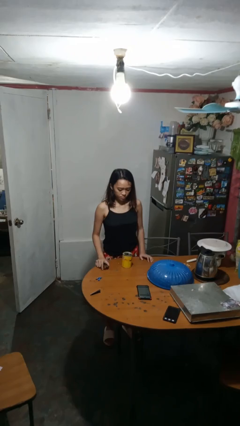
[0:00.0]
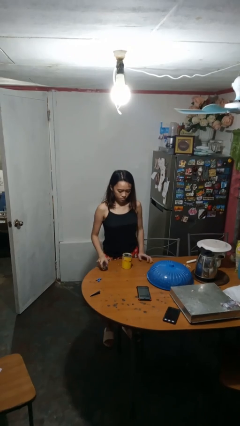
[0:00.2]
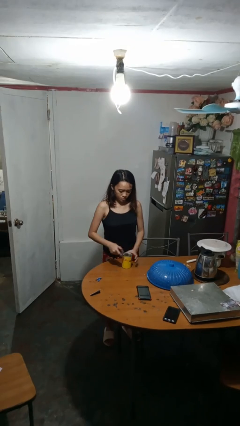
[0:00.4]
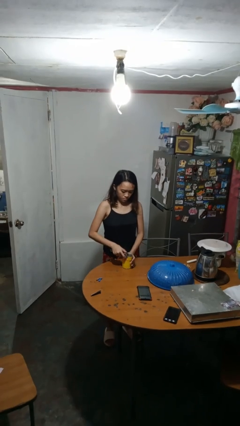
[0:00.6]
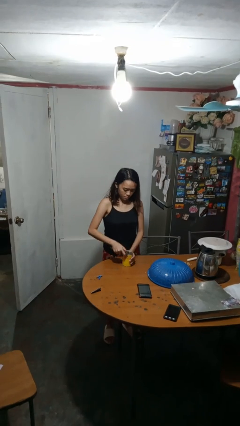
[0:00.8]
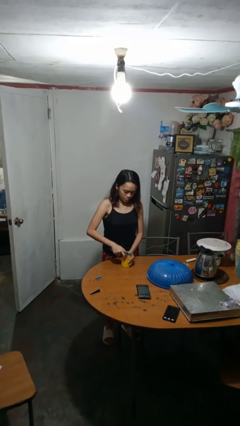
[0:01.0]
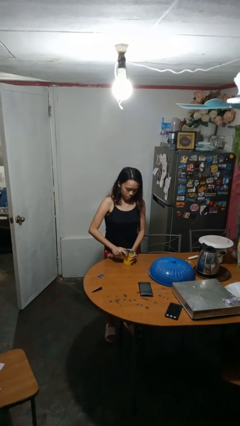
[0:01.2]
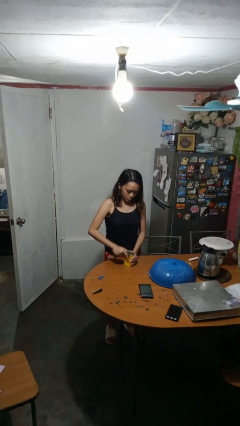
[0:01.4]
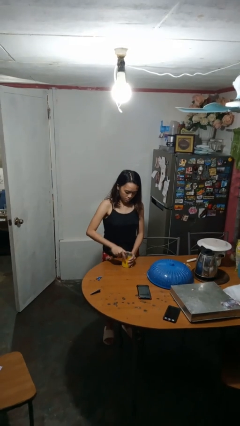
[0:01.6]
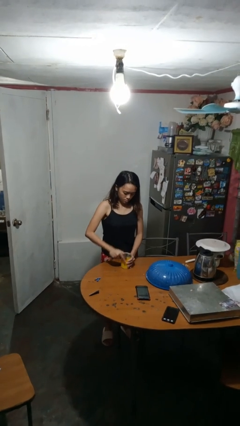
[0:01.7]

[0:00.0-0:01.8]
person opens can with can opener

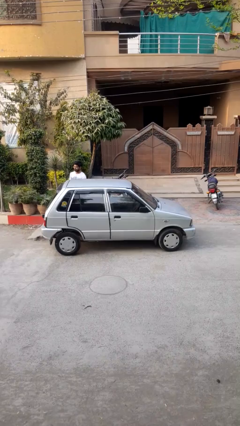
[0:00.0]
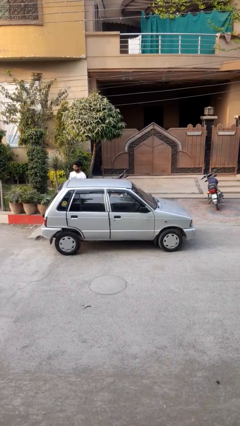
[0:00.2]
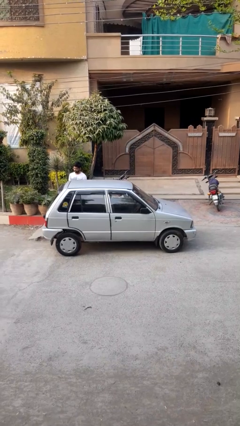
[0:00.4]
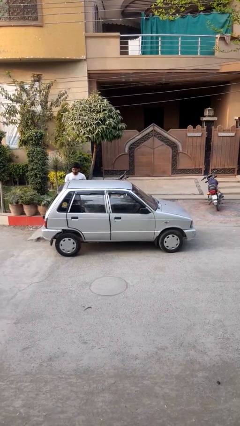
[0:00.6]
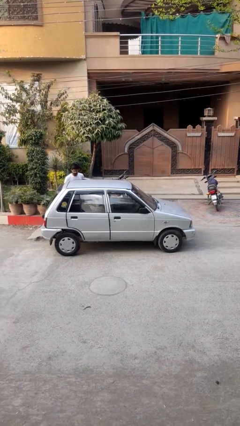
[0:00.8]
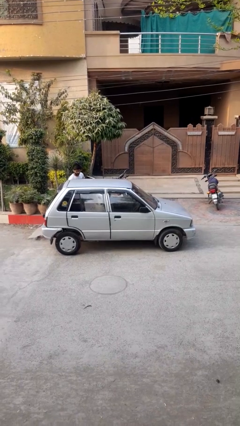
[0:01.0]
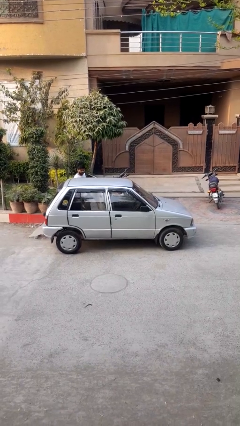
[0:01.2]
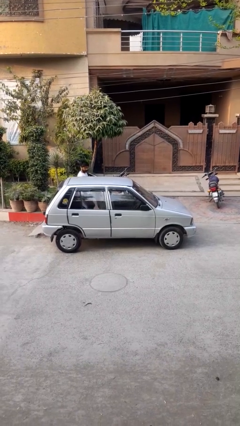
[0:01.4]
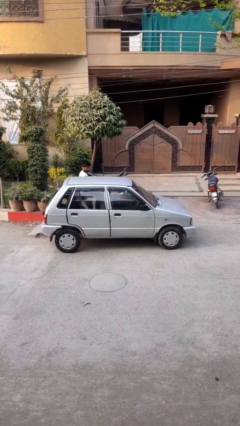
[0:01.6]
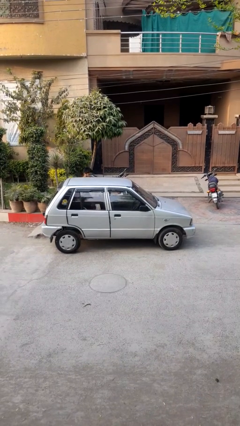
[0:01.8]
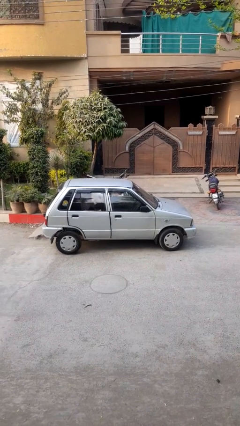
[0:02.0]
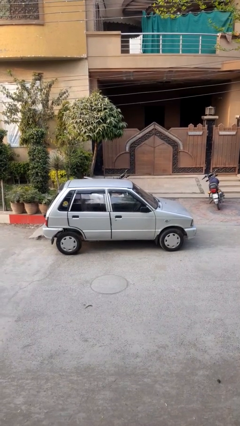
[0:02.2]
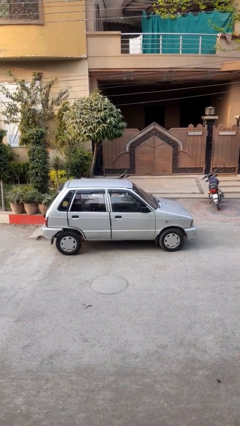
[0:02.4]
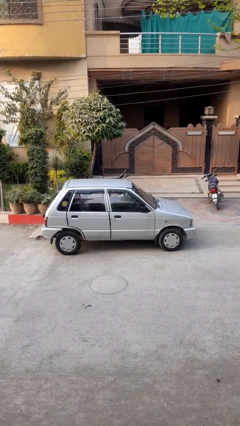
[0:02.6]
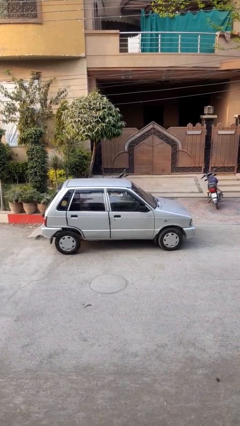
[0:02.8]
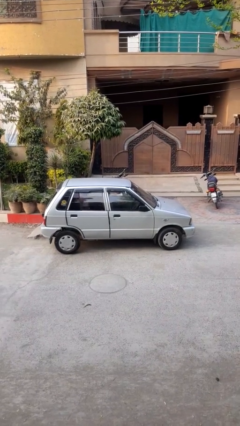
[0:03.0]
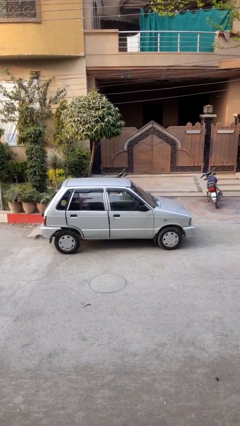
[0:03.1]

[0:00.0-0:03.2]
car picks up person

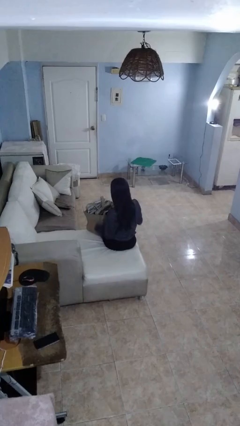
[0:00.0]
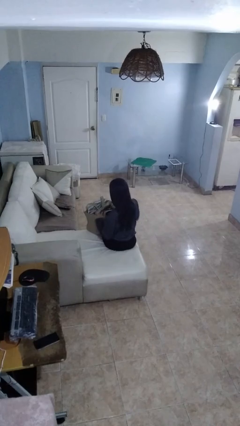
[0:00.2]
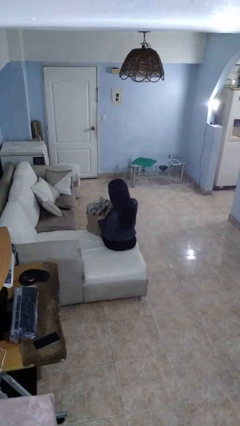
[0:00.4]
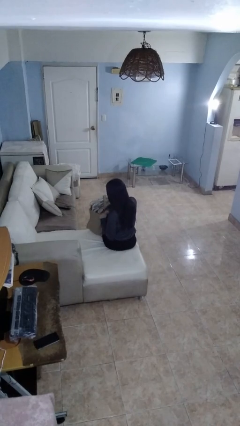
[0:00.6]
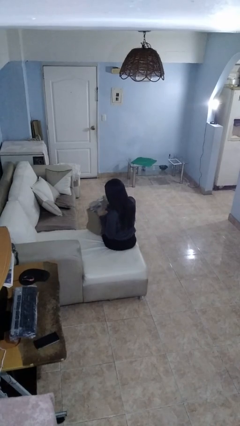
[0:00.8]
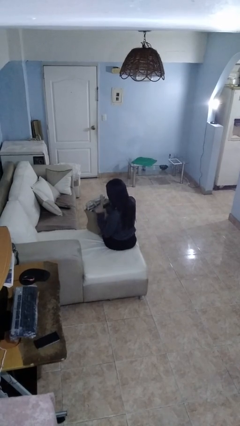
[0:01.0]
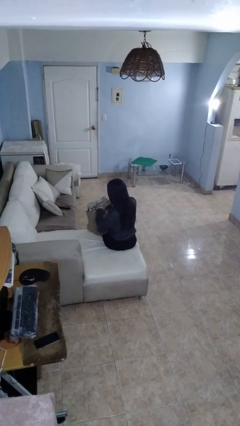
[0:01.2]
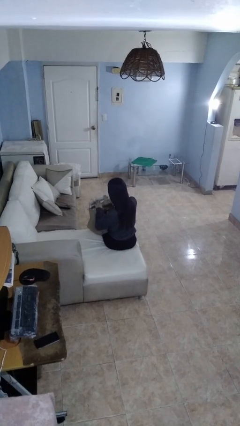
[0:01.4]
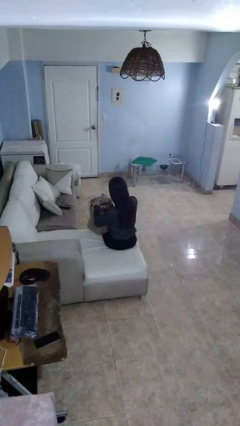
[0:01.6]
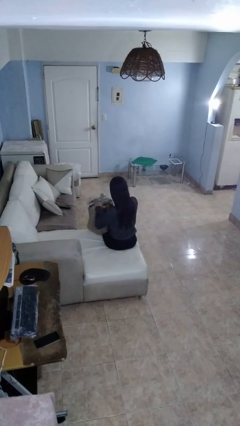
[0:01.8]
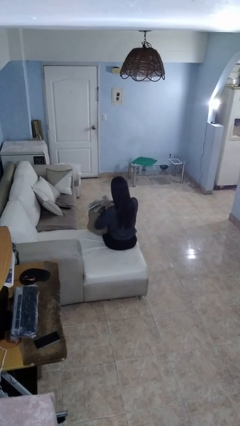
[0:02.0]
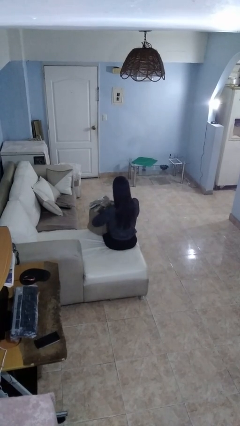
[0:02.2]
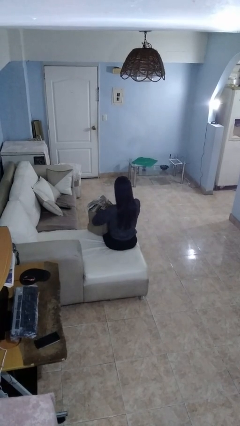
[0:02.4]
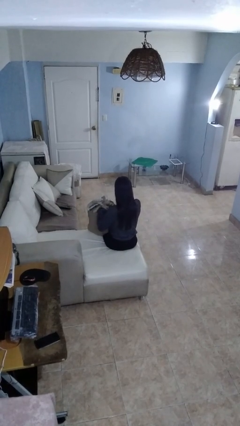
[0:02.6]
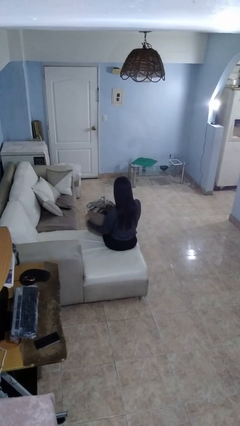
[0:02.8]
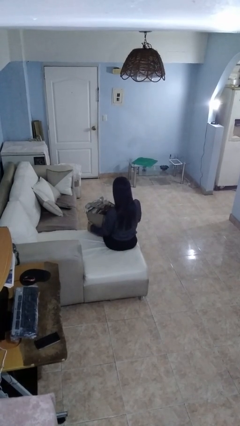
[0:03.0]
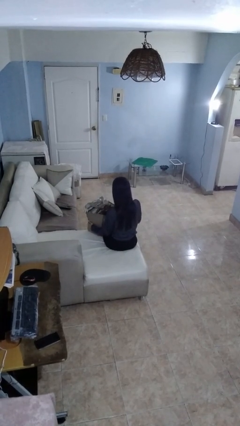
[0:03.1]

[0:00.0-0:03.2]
person searches in bag

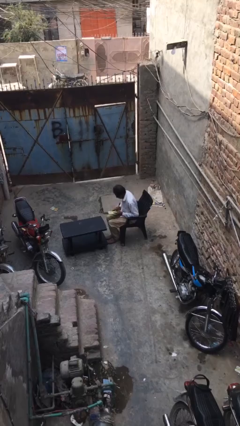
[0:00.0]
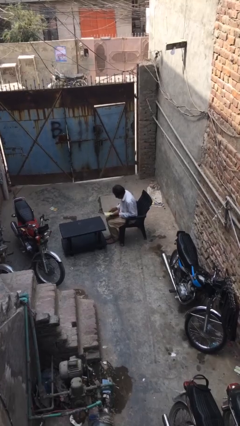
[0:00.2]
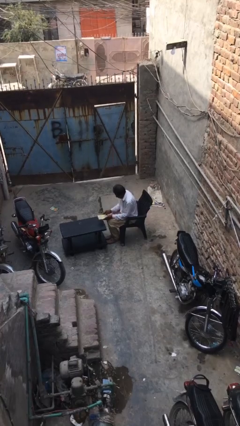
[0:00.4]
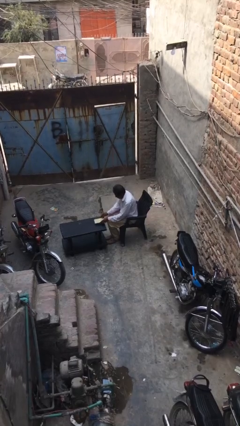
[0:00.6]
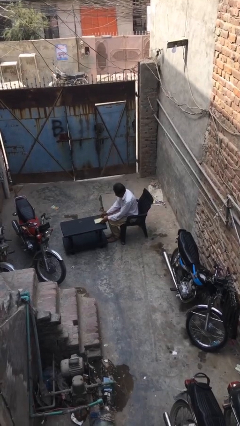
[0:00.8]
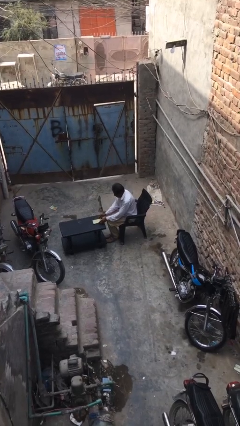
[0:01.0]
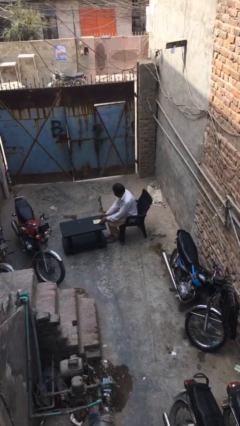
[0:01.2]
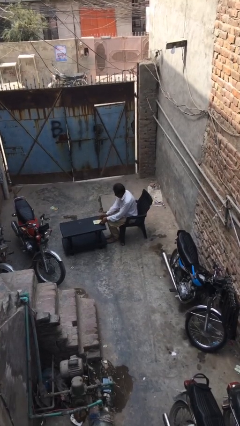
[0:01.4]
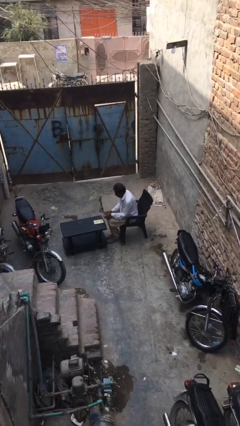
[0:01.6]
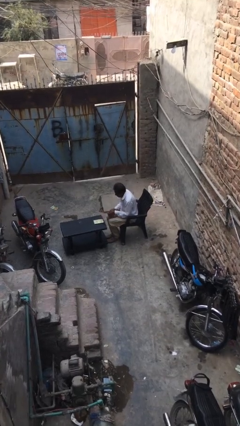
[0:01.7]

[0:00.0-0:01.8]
person puts down object on table

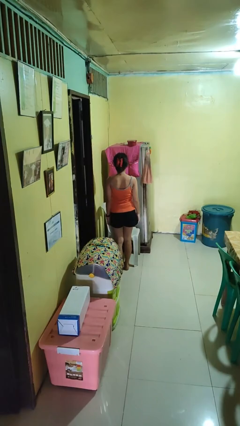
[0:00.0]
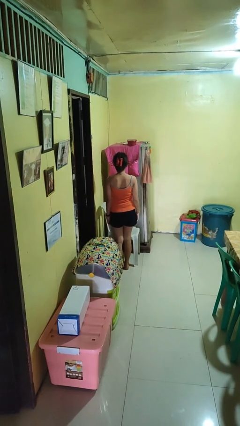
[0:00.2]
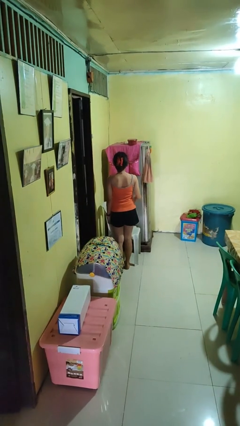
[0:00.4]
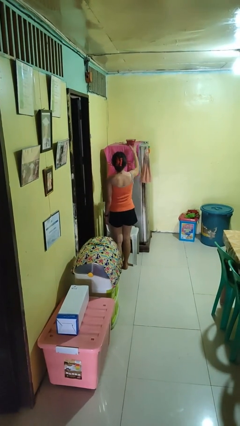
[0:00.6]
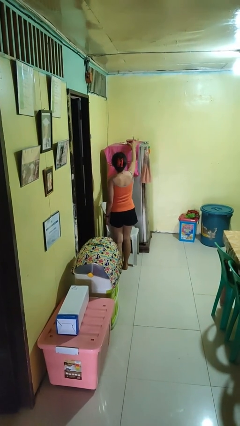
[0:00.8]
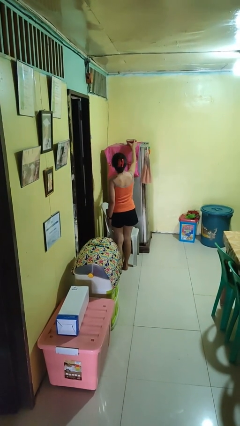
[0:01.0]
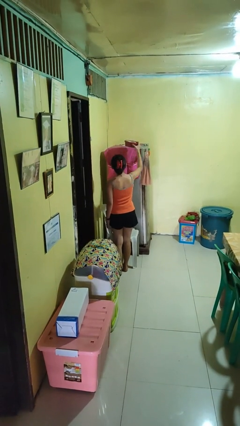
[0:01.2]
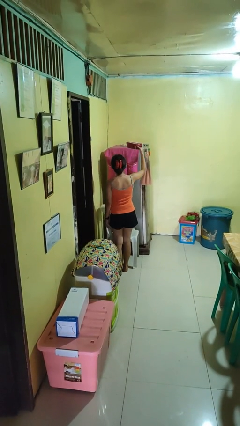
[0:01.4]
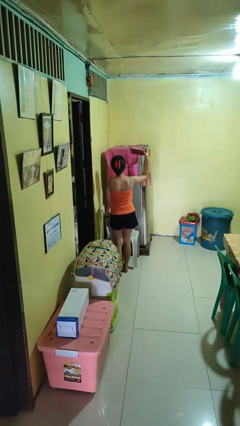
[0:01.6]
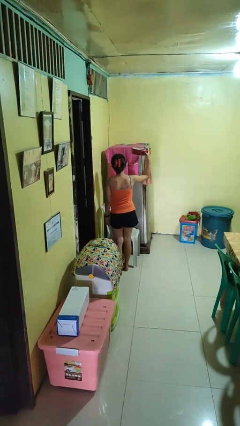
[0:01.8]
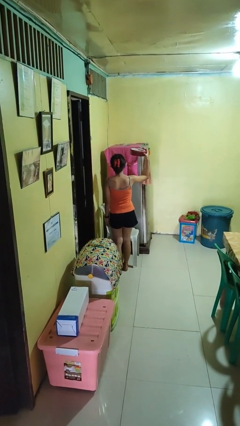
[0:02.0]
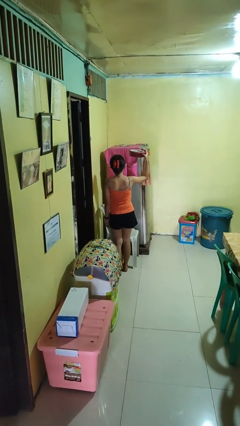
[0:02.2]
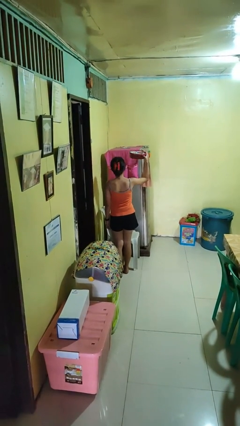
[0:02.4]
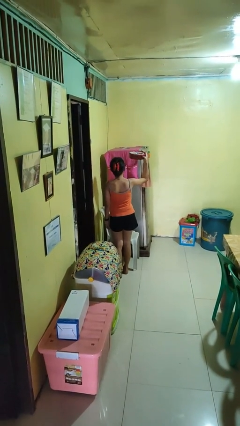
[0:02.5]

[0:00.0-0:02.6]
person picks up object from shelf

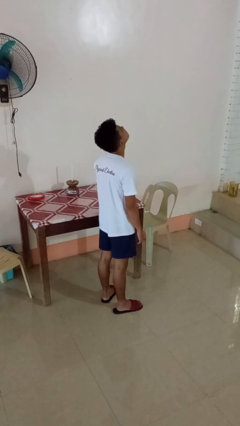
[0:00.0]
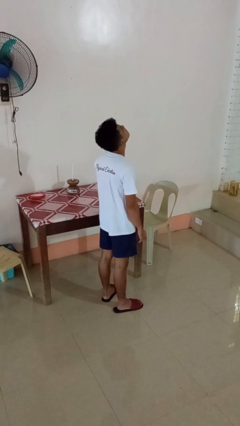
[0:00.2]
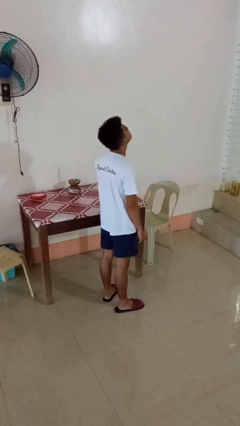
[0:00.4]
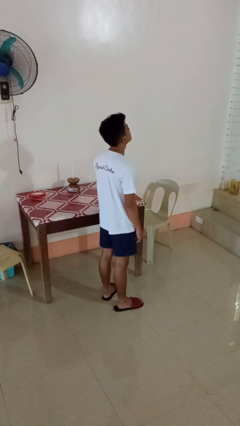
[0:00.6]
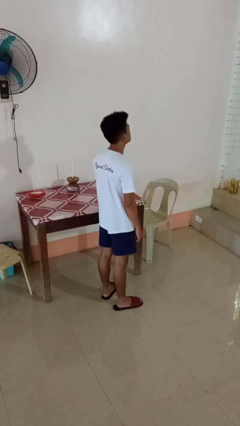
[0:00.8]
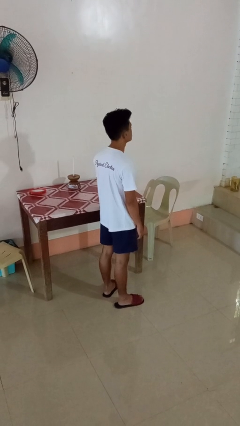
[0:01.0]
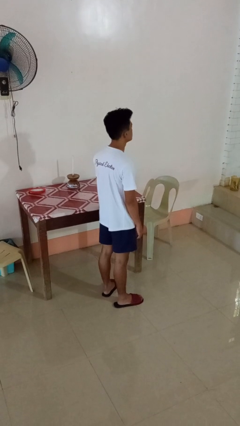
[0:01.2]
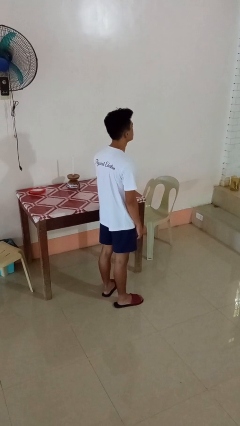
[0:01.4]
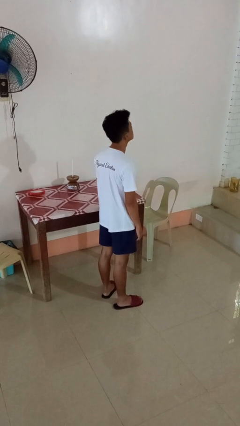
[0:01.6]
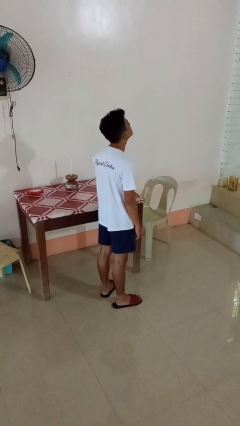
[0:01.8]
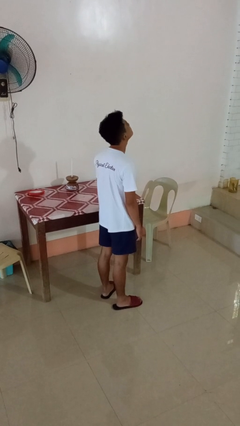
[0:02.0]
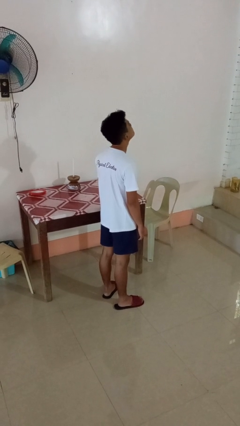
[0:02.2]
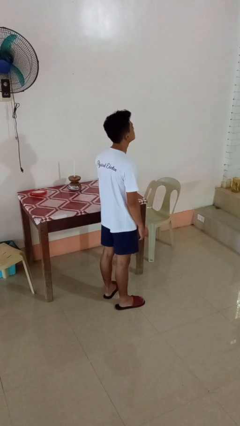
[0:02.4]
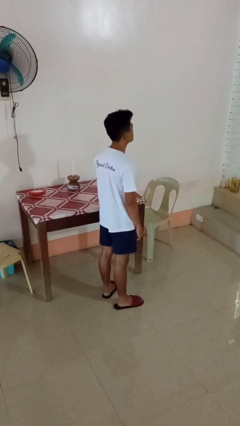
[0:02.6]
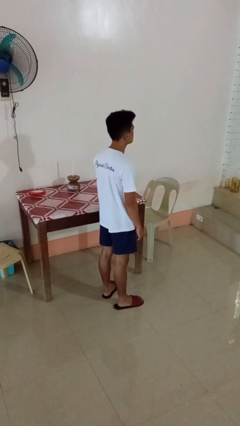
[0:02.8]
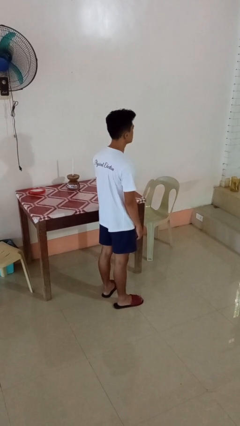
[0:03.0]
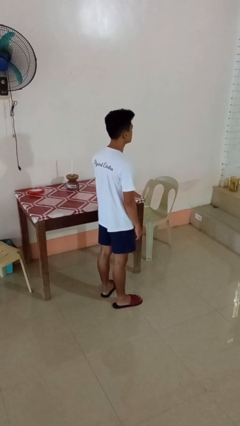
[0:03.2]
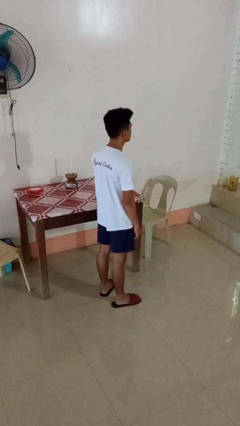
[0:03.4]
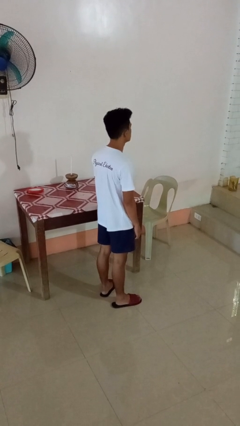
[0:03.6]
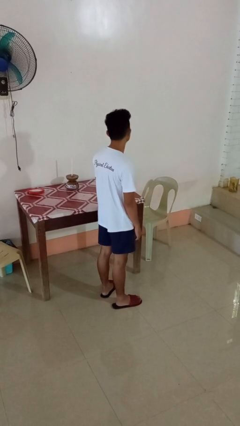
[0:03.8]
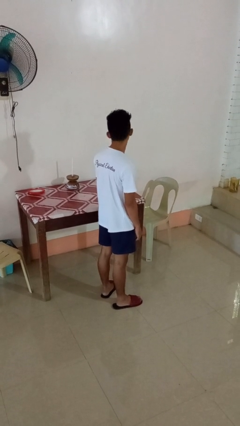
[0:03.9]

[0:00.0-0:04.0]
person nods head

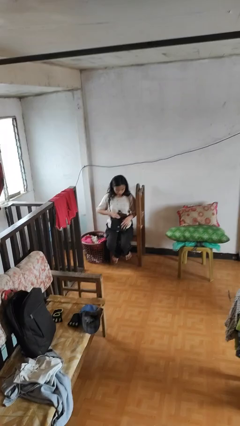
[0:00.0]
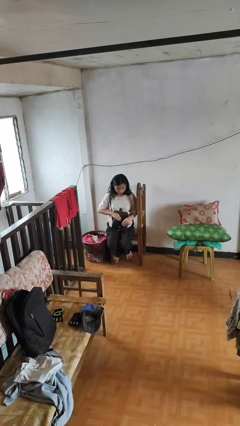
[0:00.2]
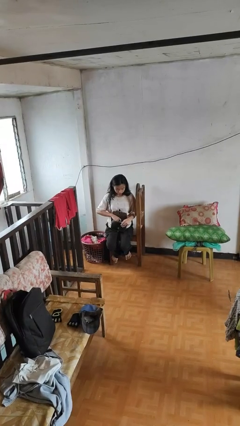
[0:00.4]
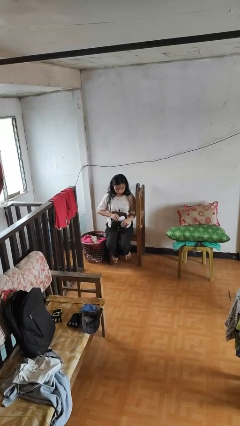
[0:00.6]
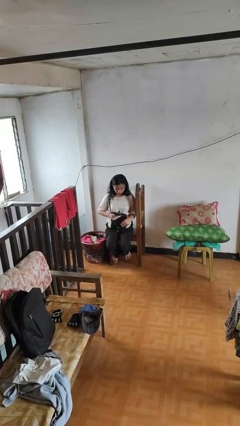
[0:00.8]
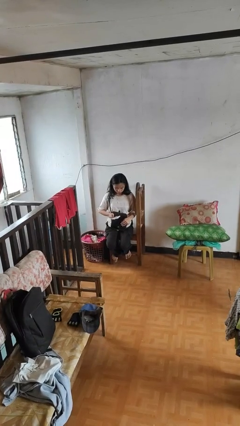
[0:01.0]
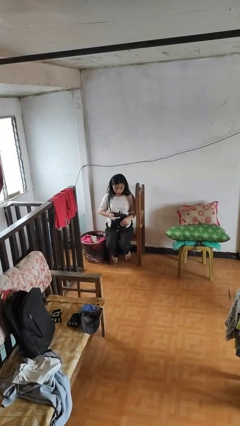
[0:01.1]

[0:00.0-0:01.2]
person searches in purse
